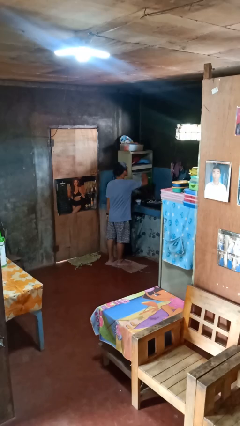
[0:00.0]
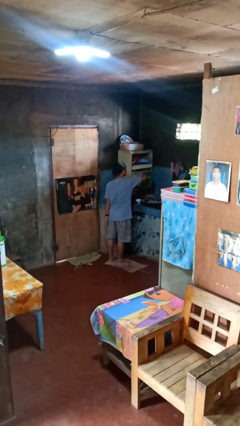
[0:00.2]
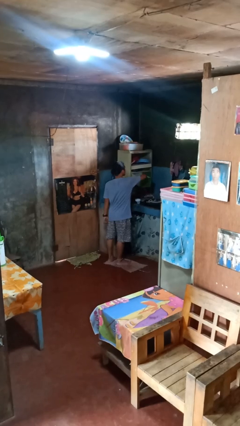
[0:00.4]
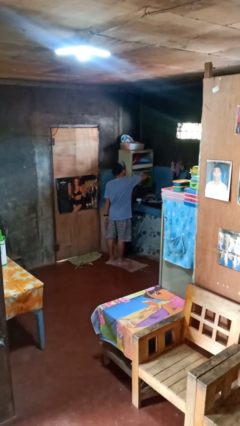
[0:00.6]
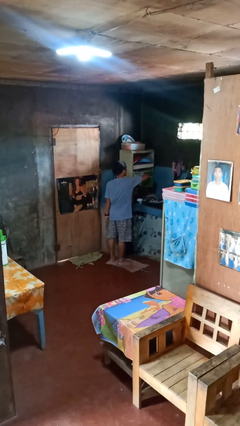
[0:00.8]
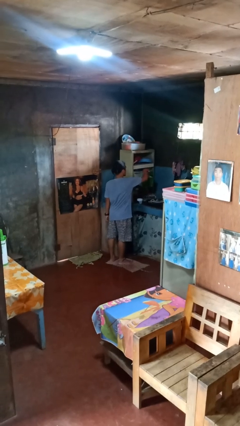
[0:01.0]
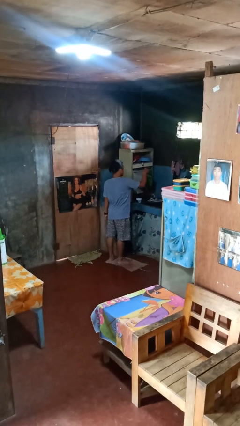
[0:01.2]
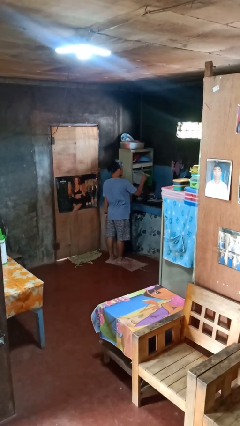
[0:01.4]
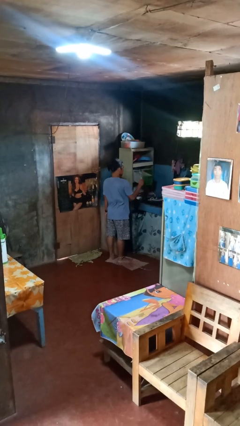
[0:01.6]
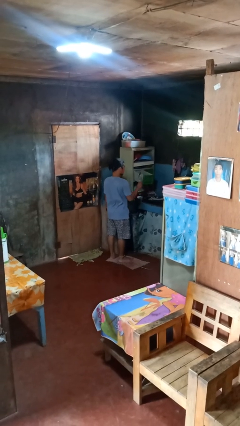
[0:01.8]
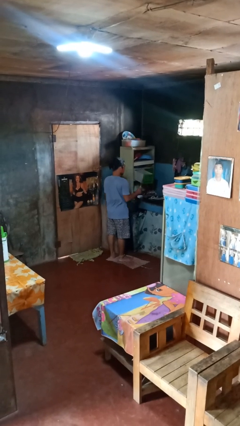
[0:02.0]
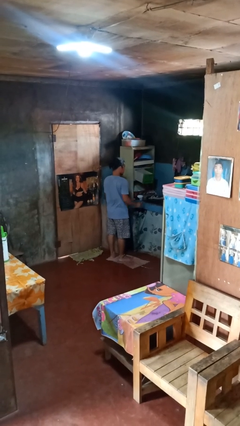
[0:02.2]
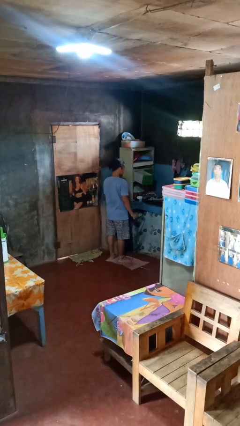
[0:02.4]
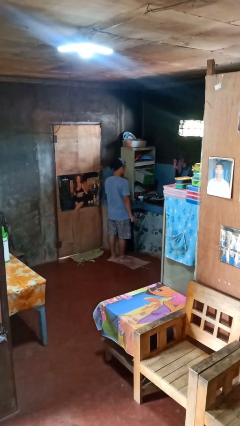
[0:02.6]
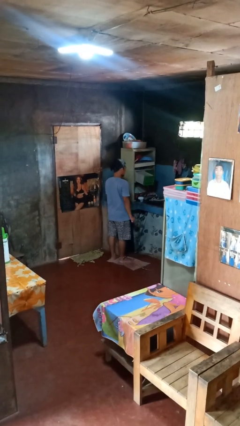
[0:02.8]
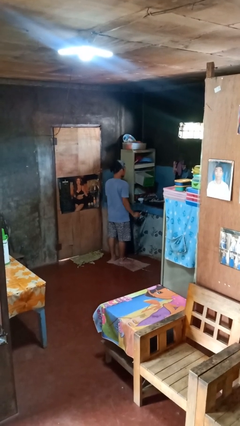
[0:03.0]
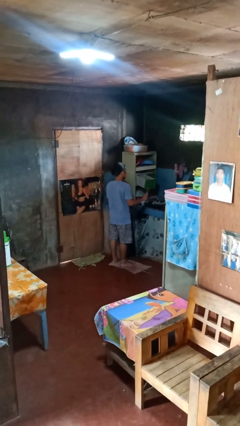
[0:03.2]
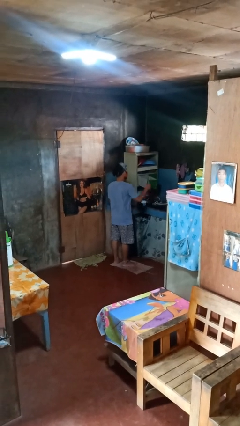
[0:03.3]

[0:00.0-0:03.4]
person takes object from kitchen drawer

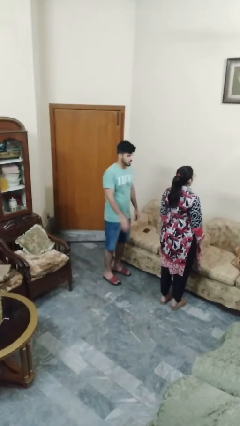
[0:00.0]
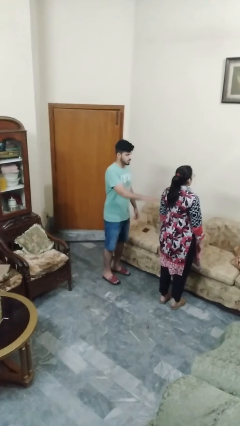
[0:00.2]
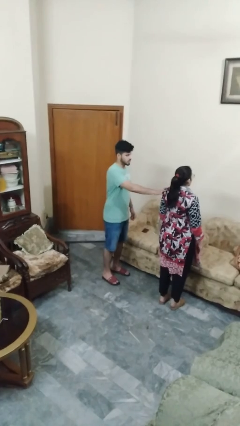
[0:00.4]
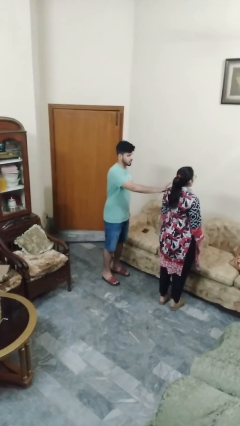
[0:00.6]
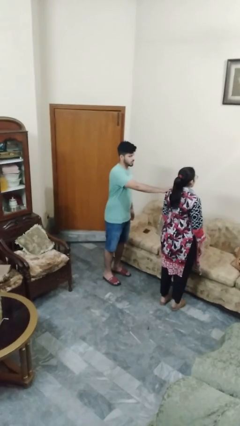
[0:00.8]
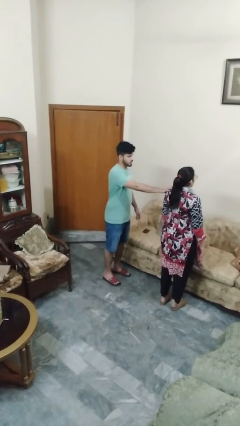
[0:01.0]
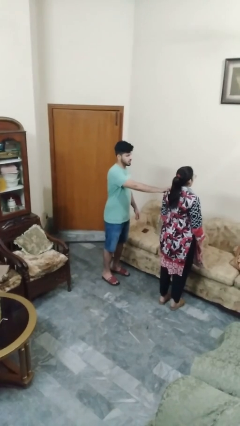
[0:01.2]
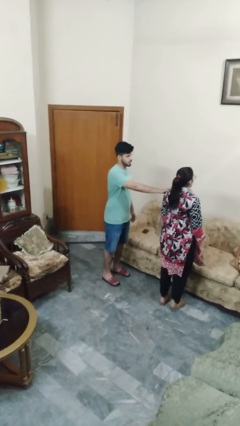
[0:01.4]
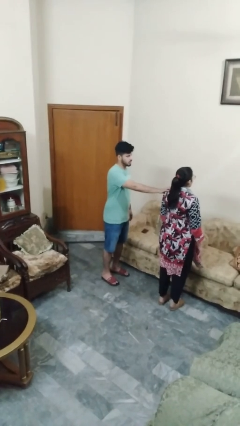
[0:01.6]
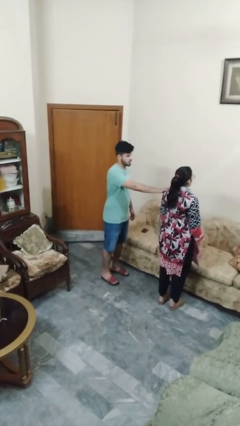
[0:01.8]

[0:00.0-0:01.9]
person grabs person by shoulder

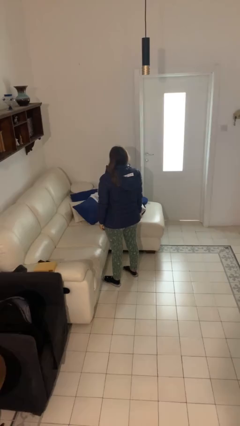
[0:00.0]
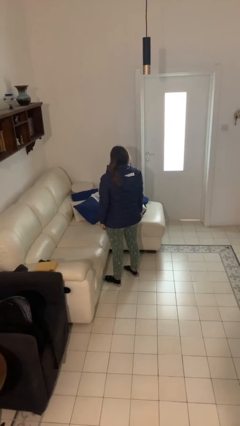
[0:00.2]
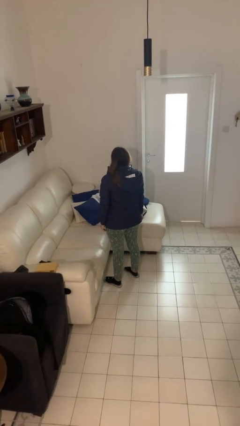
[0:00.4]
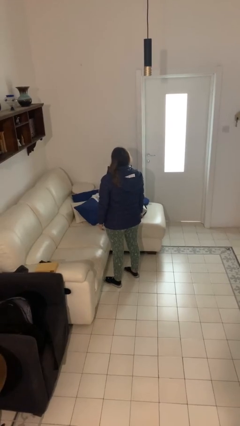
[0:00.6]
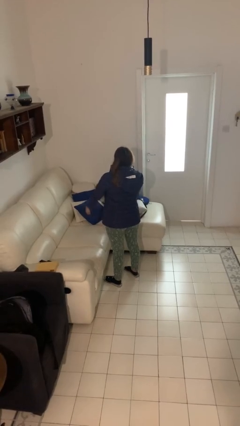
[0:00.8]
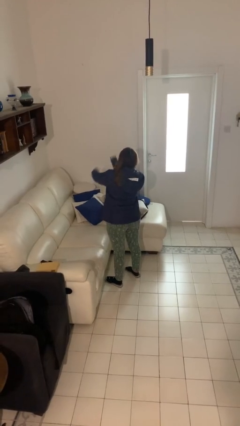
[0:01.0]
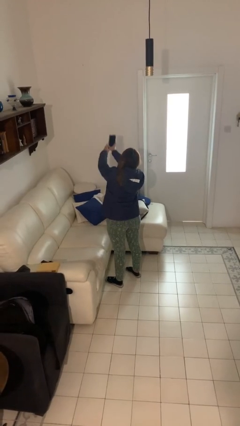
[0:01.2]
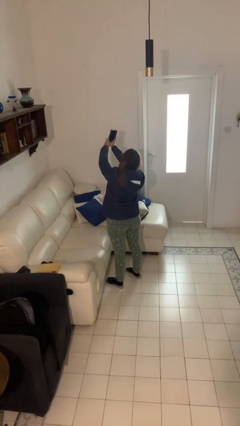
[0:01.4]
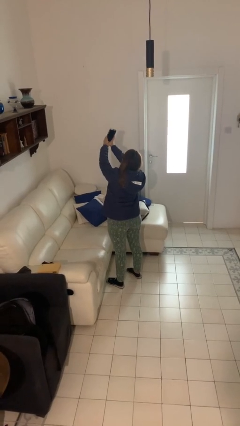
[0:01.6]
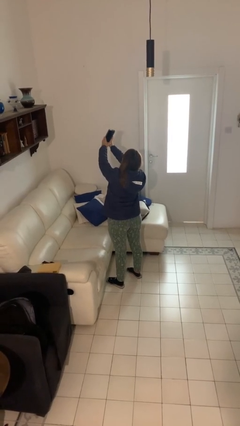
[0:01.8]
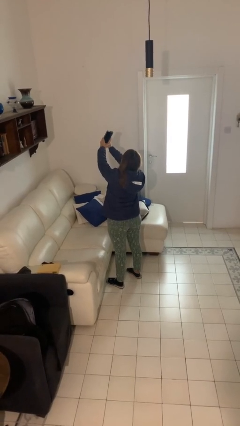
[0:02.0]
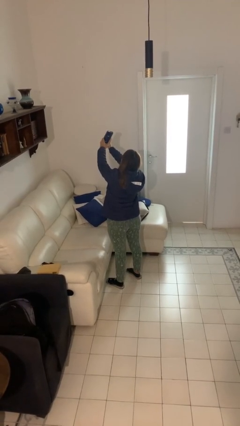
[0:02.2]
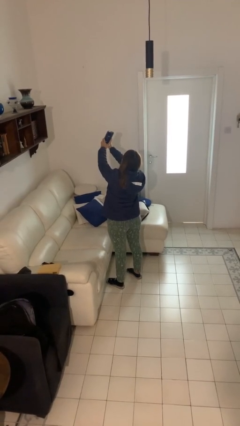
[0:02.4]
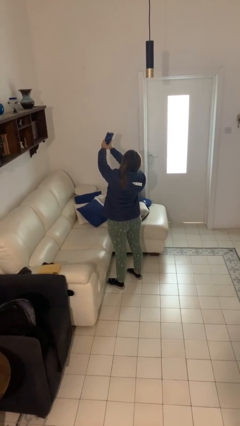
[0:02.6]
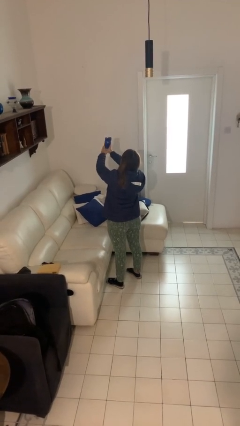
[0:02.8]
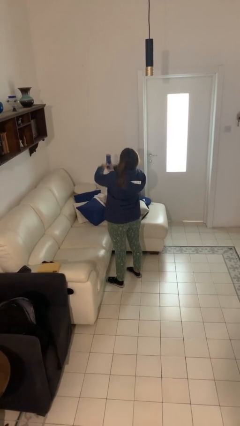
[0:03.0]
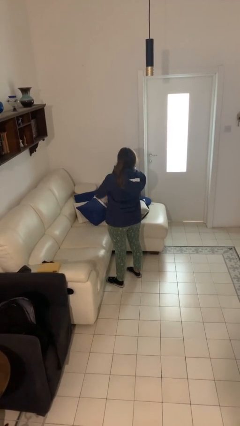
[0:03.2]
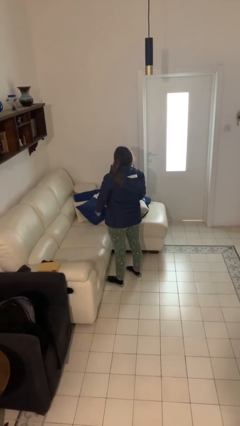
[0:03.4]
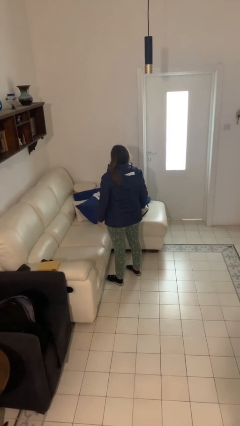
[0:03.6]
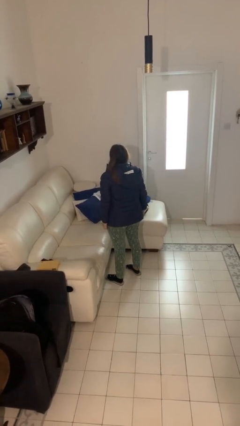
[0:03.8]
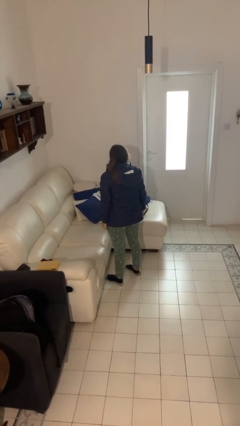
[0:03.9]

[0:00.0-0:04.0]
person takes selfie

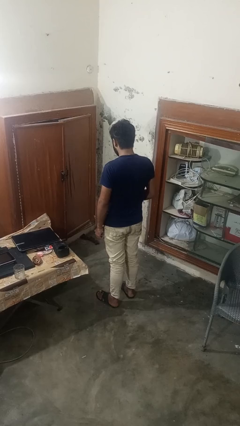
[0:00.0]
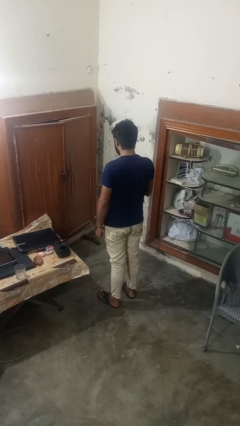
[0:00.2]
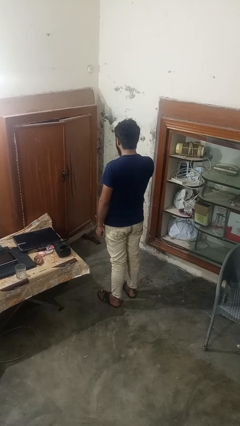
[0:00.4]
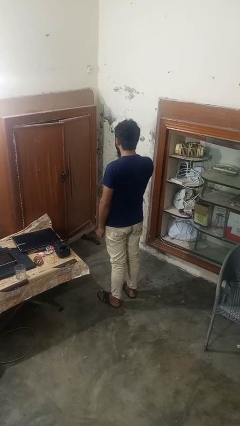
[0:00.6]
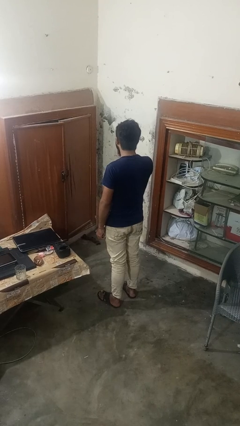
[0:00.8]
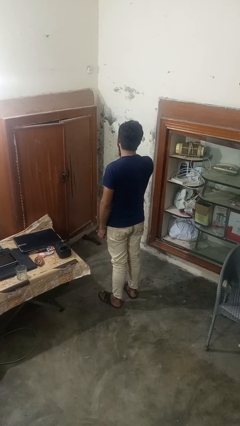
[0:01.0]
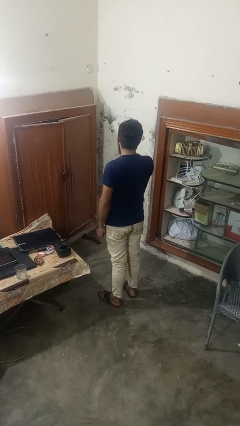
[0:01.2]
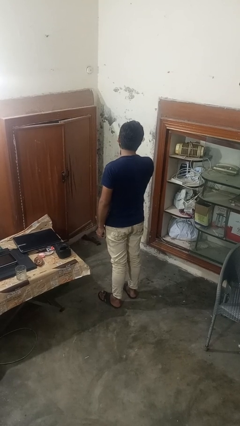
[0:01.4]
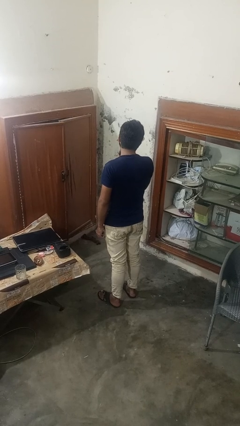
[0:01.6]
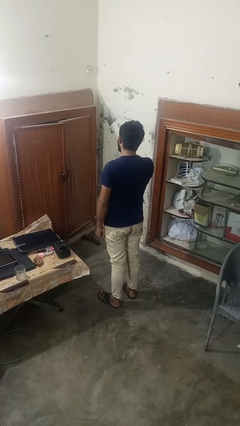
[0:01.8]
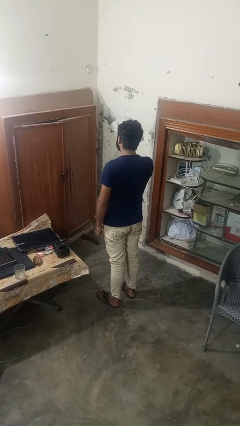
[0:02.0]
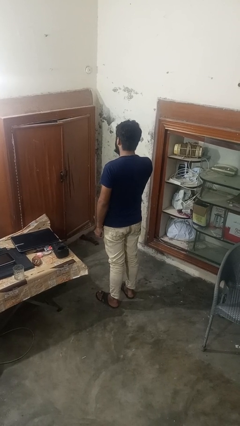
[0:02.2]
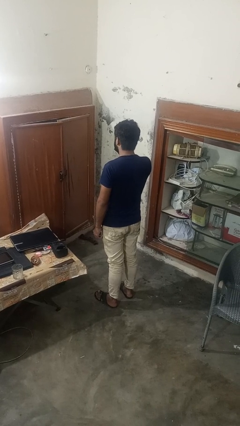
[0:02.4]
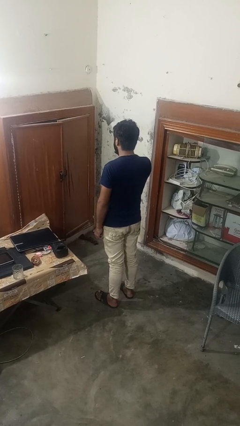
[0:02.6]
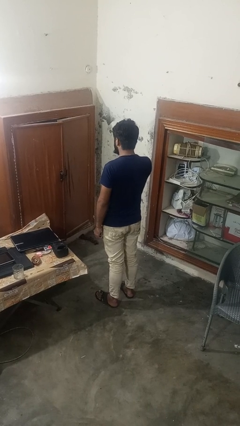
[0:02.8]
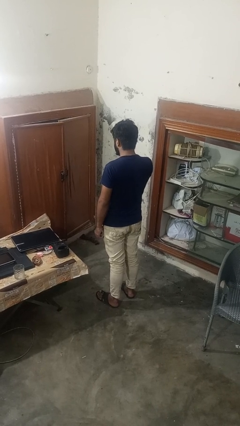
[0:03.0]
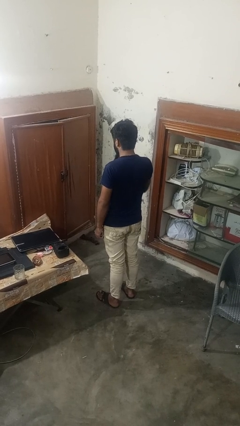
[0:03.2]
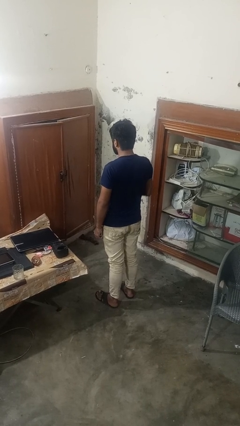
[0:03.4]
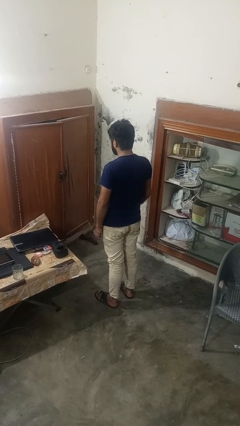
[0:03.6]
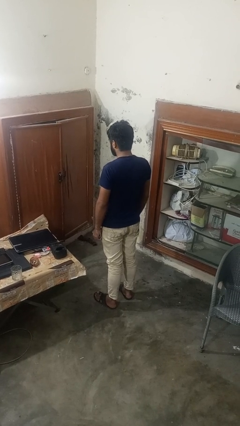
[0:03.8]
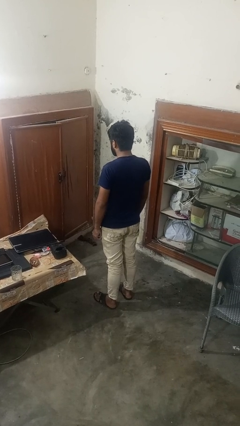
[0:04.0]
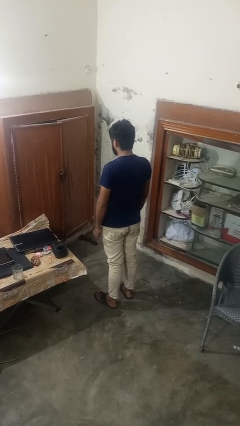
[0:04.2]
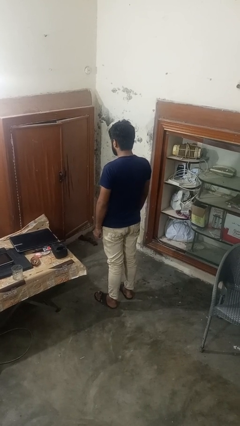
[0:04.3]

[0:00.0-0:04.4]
person wipes mouth with napkin

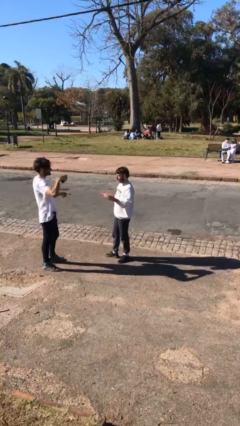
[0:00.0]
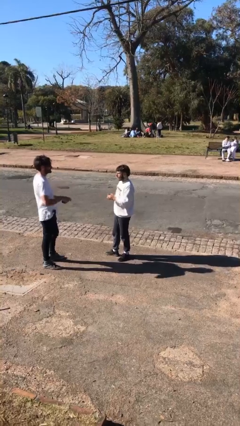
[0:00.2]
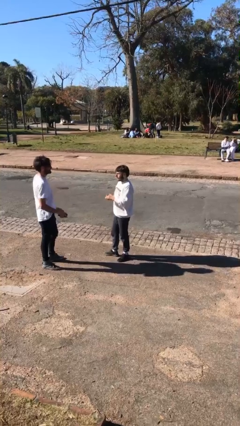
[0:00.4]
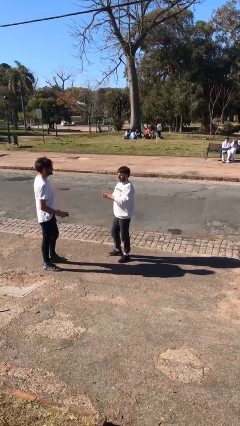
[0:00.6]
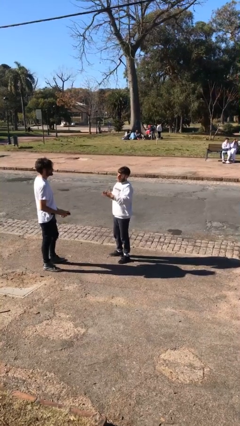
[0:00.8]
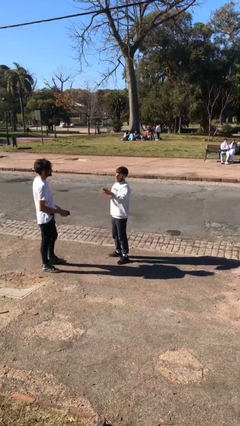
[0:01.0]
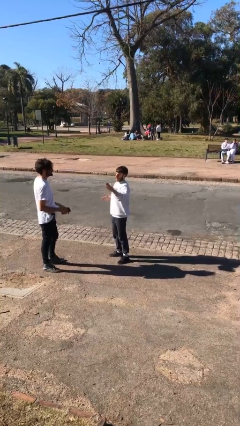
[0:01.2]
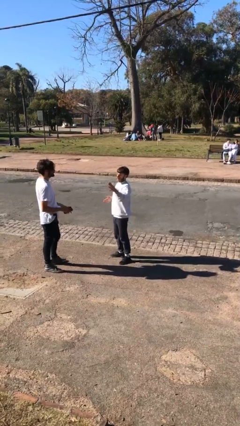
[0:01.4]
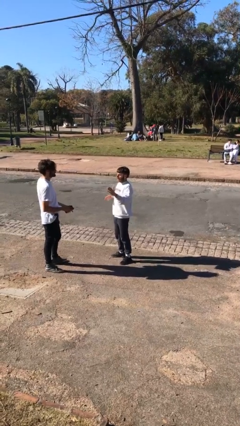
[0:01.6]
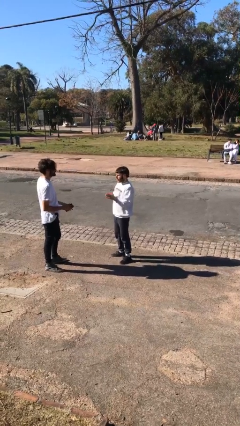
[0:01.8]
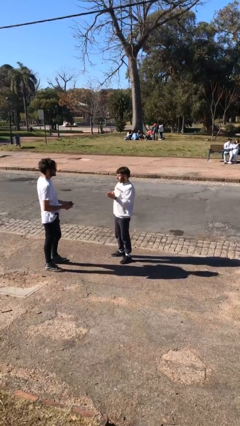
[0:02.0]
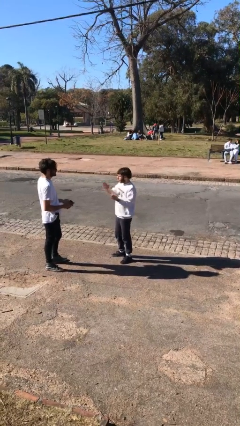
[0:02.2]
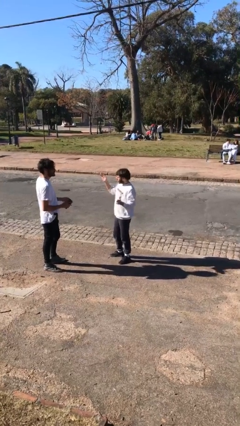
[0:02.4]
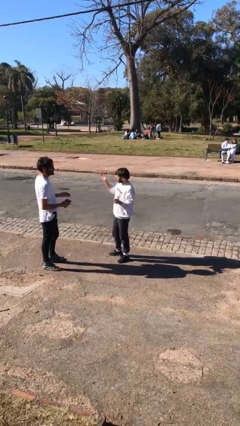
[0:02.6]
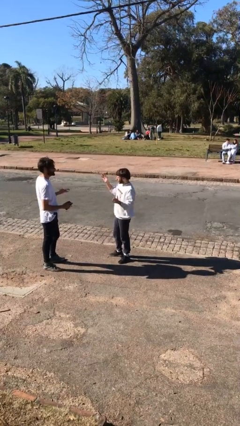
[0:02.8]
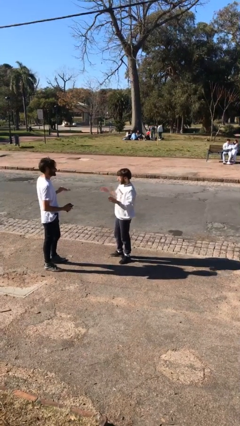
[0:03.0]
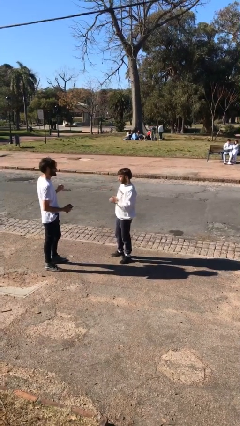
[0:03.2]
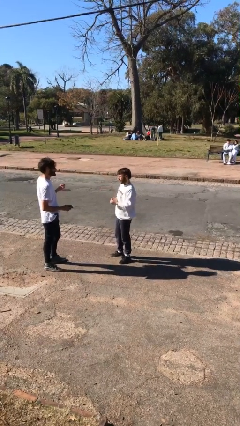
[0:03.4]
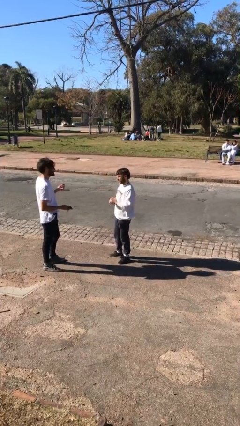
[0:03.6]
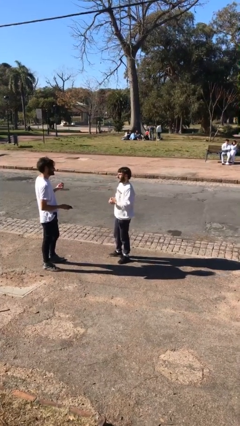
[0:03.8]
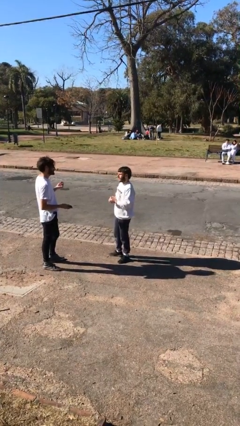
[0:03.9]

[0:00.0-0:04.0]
person talks to person
